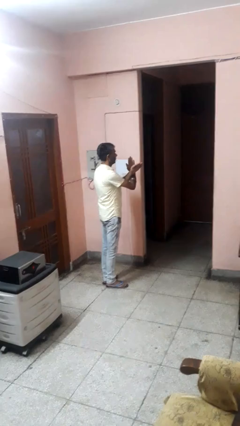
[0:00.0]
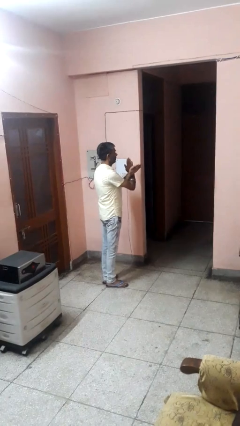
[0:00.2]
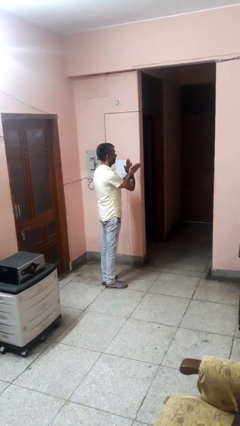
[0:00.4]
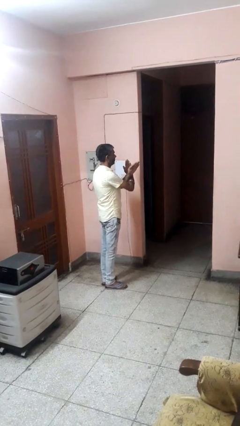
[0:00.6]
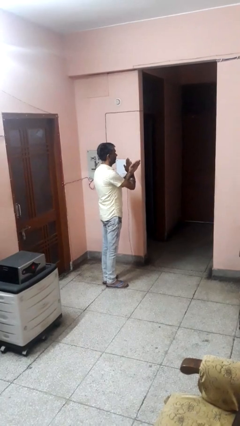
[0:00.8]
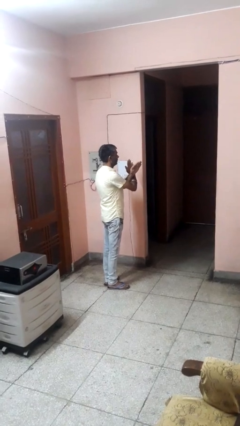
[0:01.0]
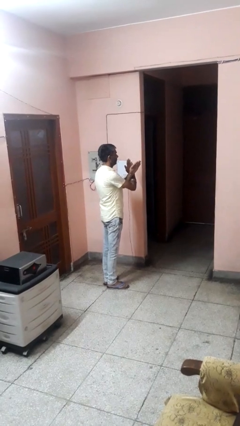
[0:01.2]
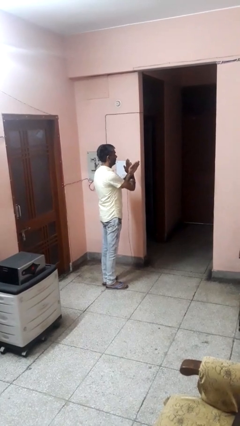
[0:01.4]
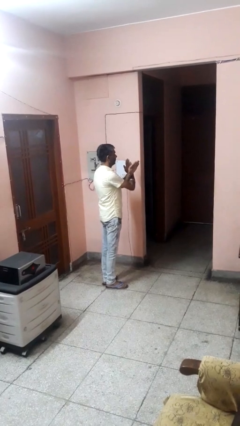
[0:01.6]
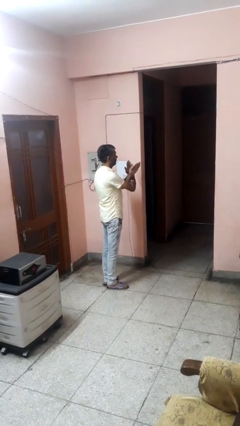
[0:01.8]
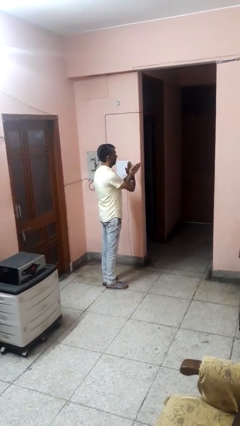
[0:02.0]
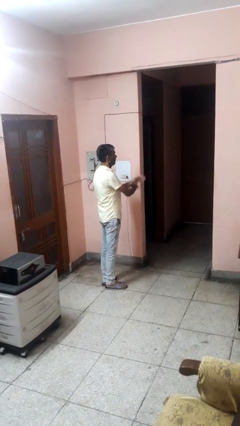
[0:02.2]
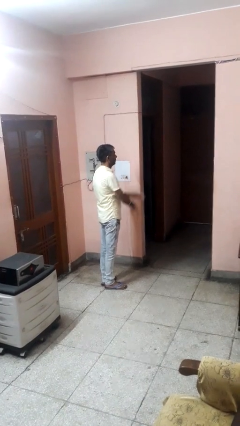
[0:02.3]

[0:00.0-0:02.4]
person gestures arms x

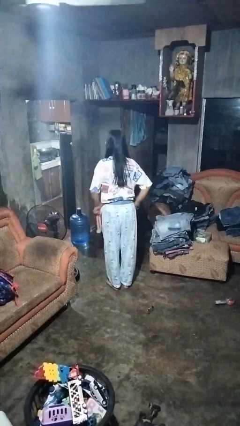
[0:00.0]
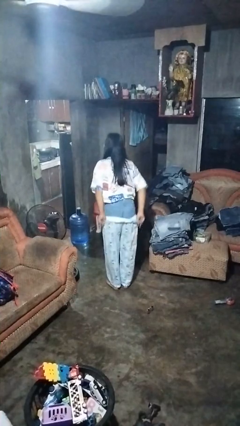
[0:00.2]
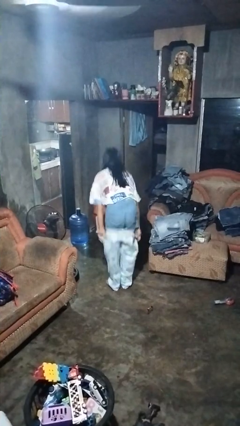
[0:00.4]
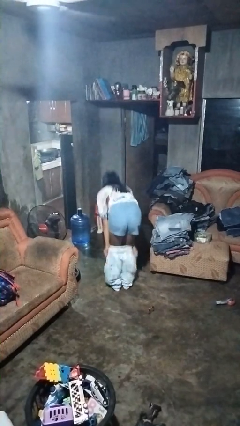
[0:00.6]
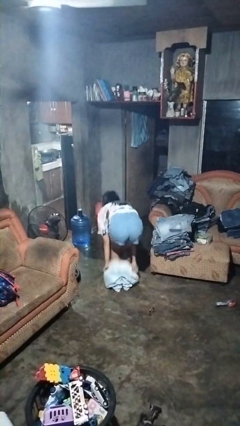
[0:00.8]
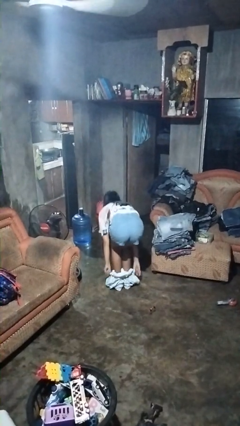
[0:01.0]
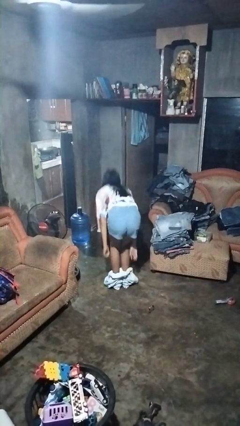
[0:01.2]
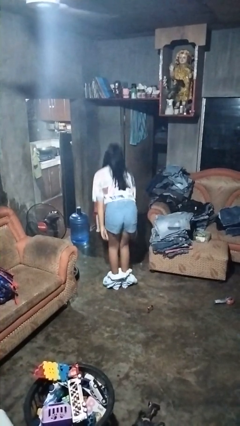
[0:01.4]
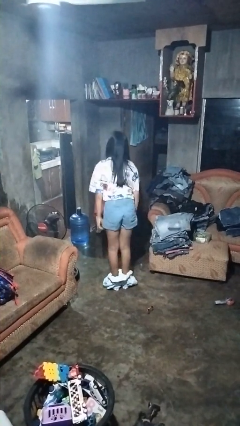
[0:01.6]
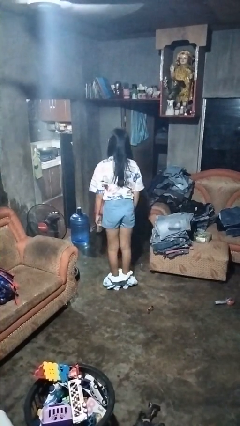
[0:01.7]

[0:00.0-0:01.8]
person takes off pants

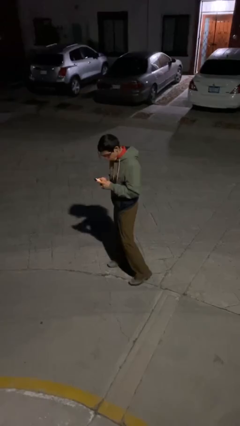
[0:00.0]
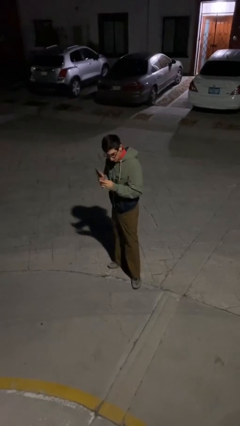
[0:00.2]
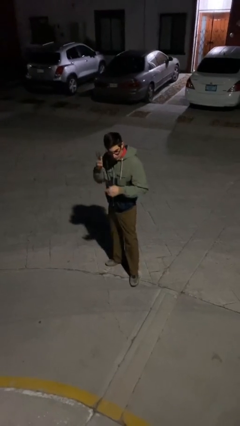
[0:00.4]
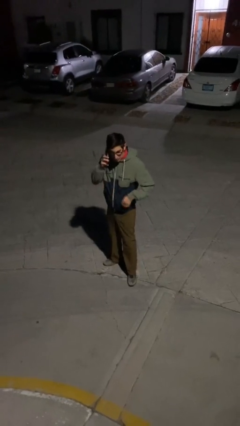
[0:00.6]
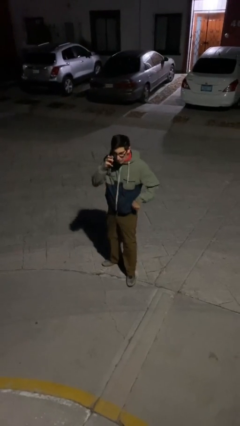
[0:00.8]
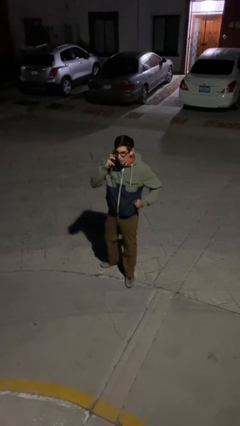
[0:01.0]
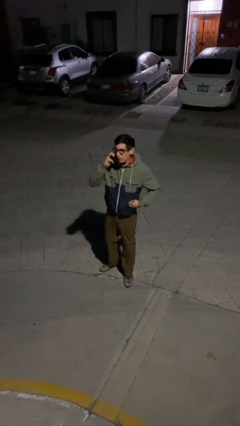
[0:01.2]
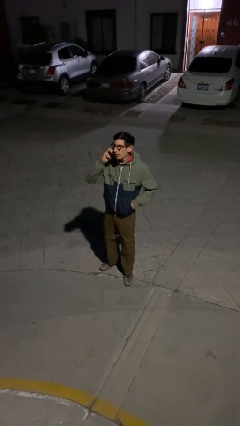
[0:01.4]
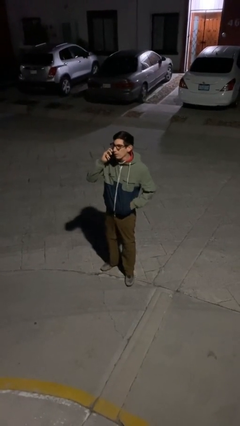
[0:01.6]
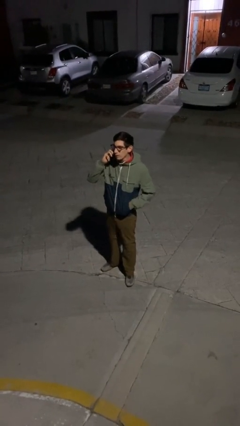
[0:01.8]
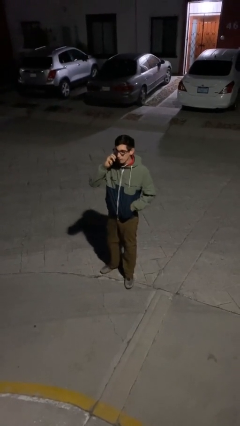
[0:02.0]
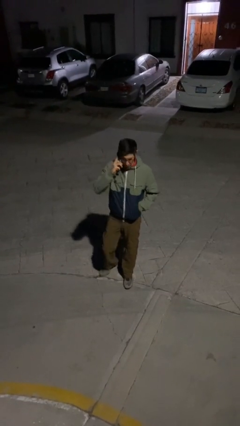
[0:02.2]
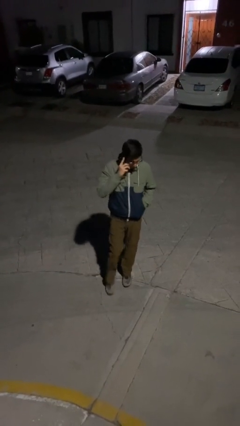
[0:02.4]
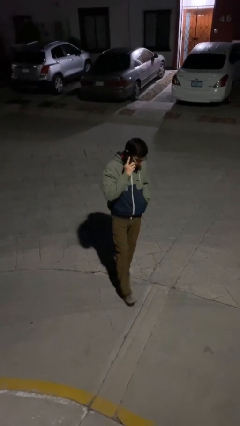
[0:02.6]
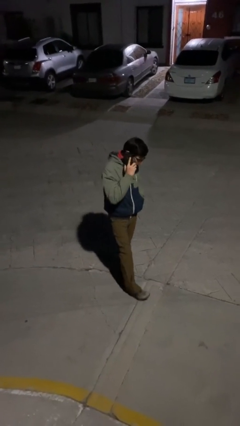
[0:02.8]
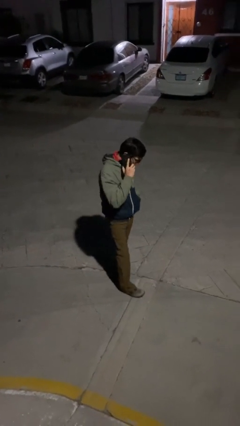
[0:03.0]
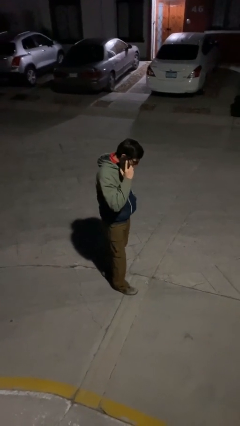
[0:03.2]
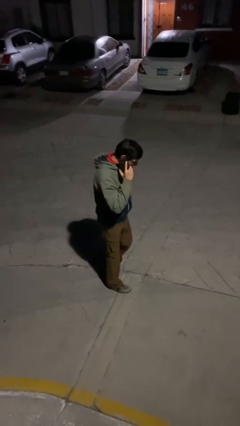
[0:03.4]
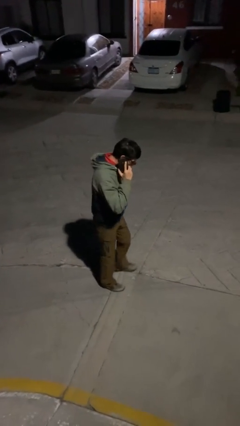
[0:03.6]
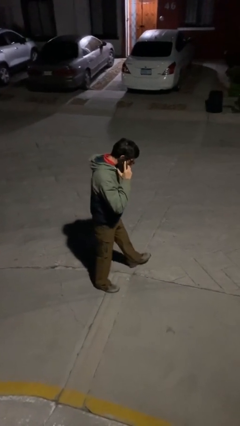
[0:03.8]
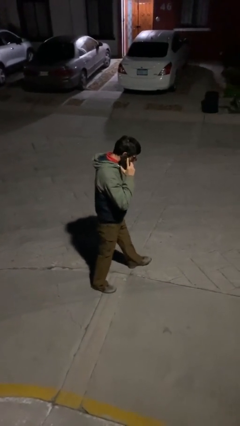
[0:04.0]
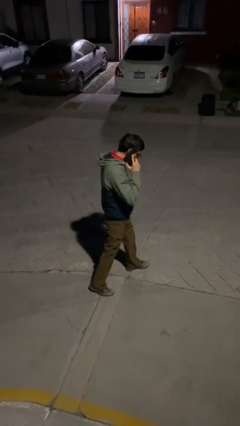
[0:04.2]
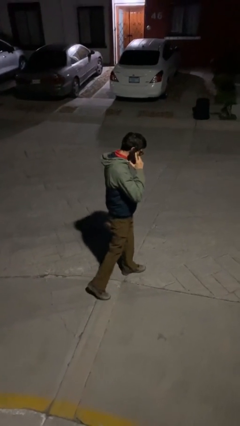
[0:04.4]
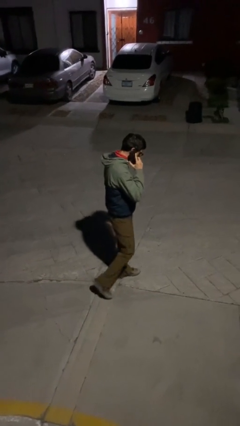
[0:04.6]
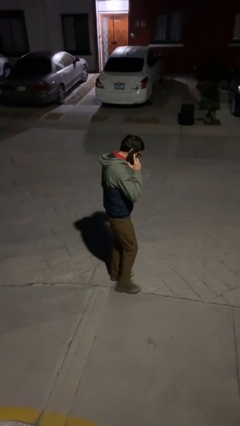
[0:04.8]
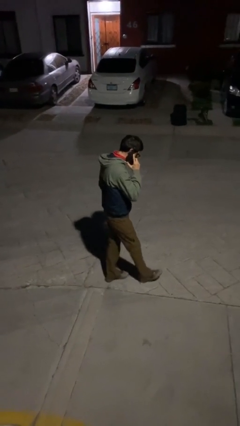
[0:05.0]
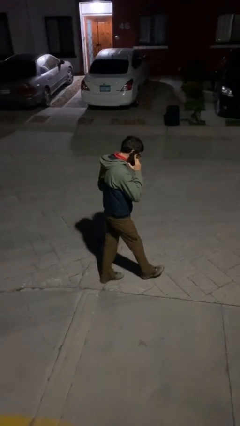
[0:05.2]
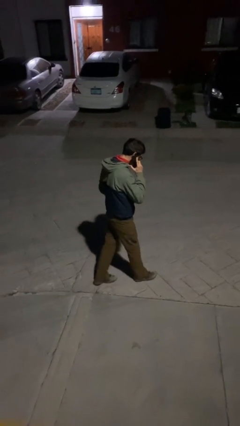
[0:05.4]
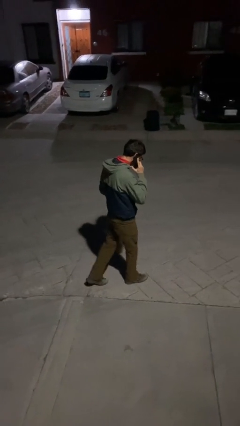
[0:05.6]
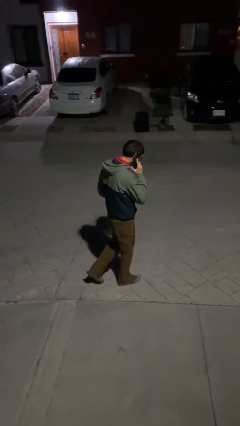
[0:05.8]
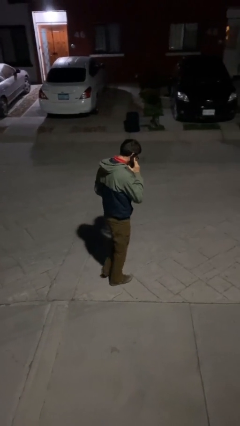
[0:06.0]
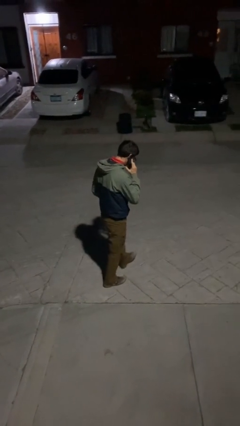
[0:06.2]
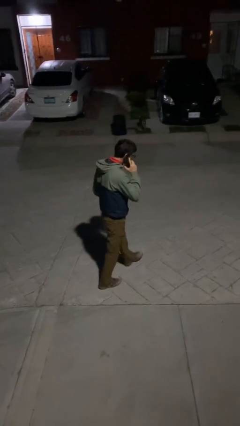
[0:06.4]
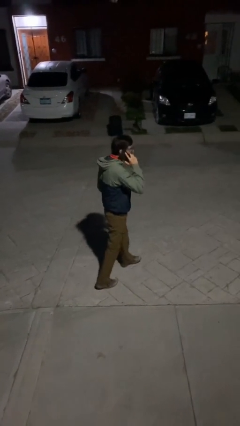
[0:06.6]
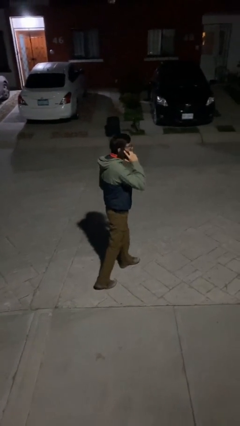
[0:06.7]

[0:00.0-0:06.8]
person talks on phone

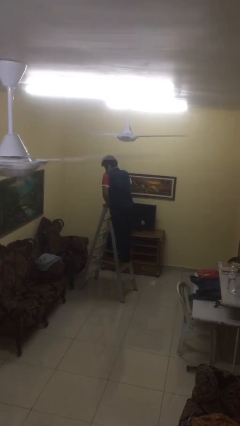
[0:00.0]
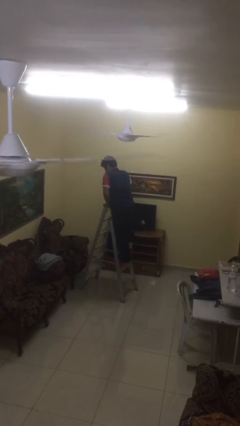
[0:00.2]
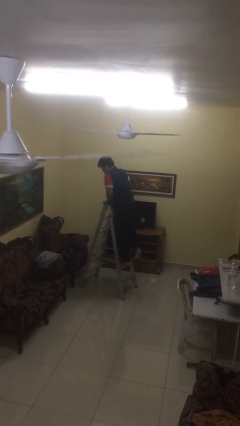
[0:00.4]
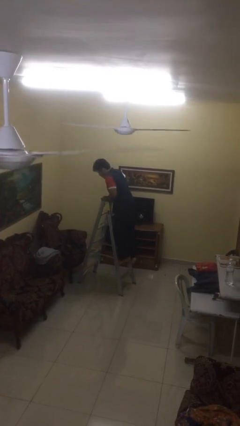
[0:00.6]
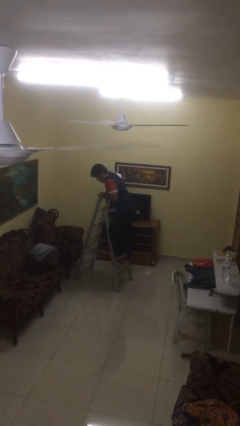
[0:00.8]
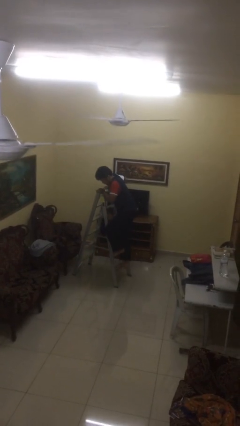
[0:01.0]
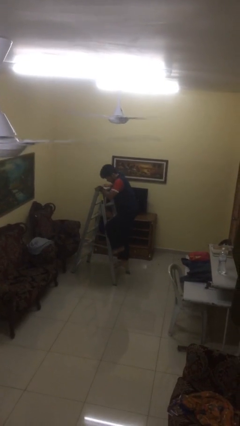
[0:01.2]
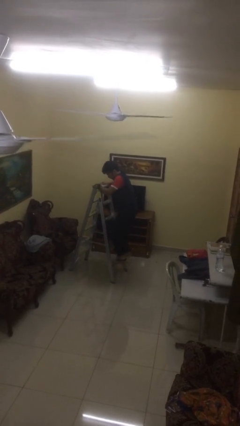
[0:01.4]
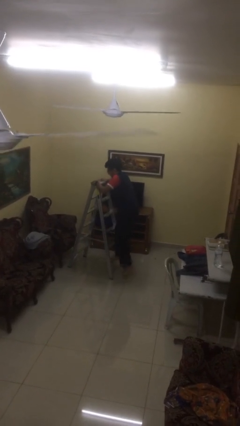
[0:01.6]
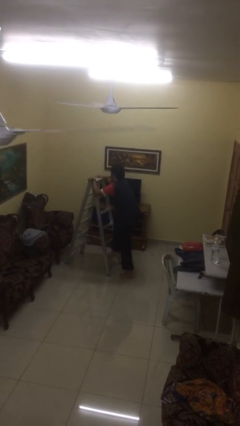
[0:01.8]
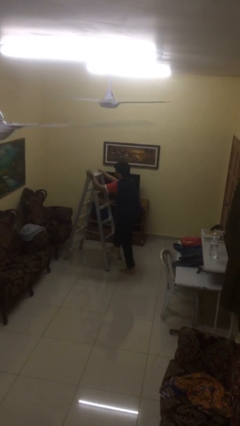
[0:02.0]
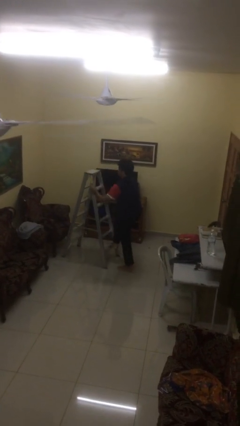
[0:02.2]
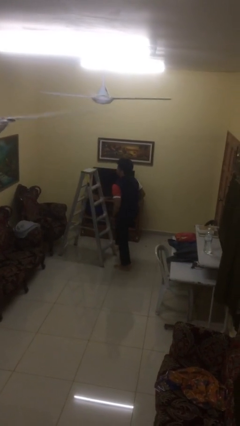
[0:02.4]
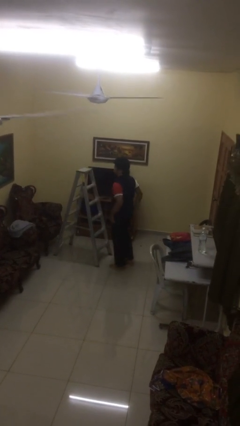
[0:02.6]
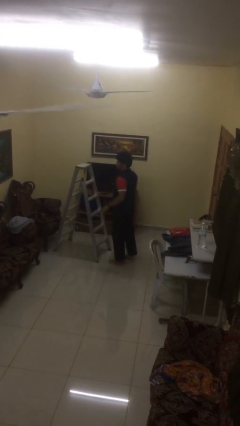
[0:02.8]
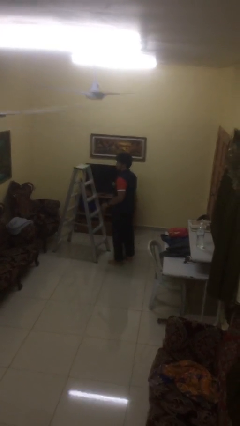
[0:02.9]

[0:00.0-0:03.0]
person climbs down ladder

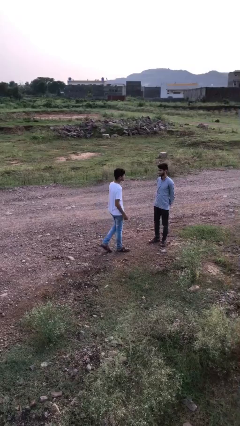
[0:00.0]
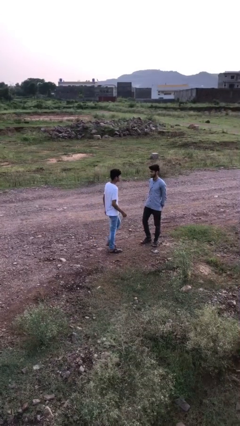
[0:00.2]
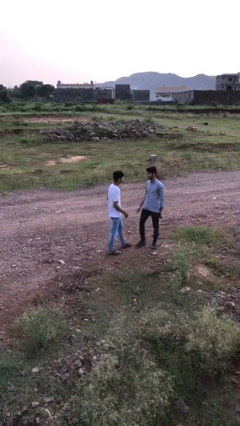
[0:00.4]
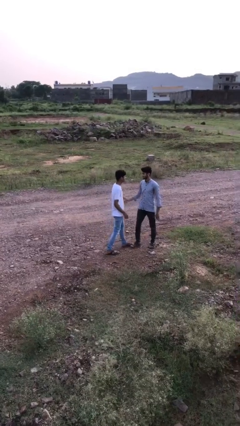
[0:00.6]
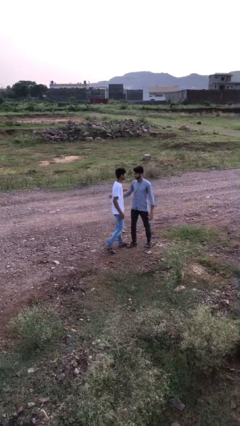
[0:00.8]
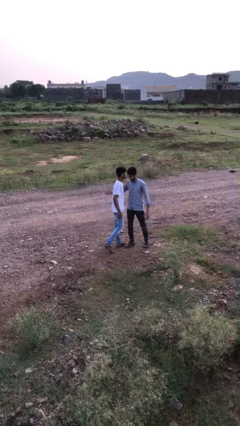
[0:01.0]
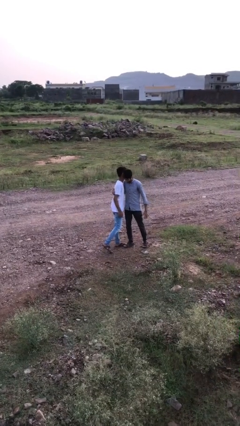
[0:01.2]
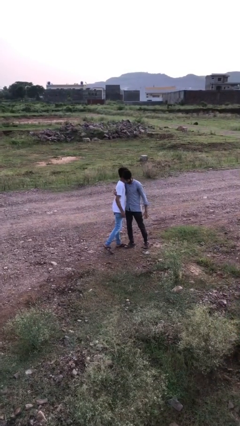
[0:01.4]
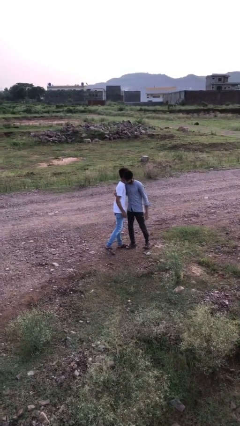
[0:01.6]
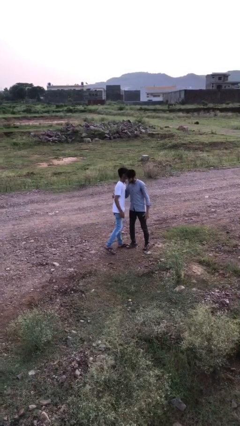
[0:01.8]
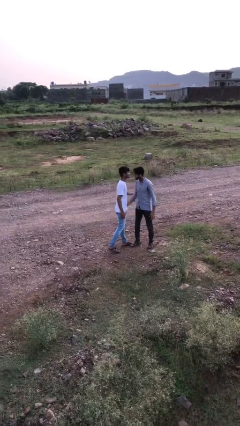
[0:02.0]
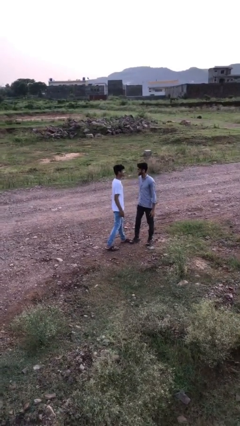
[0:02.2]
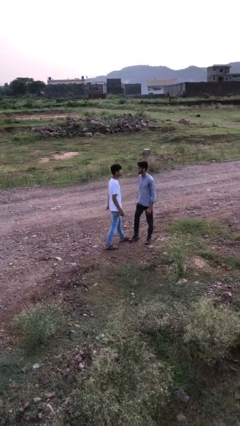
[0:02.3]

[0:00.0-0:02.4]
person embraces person

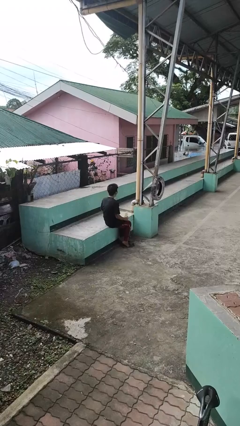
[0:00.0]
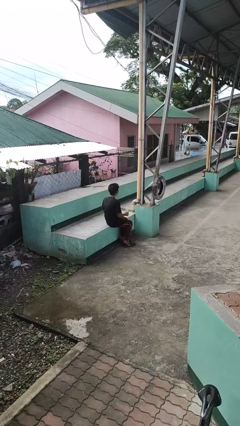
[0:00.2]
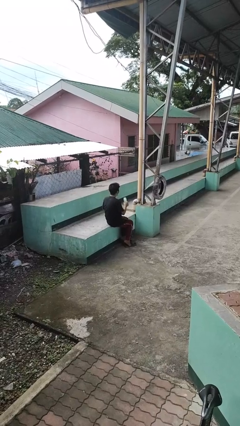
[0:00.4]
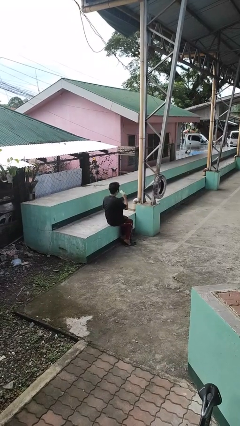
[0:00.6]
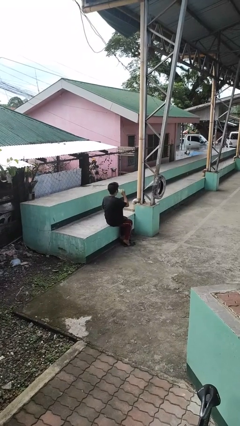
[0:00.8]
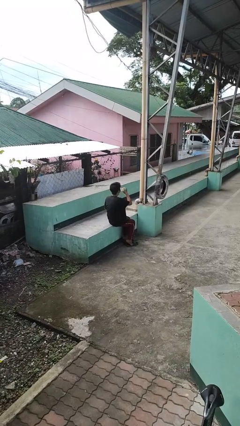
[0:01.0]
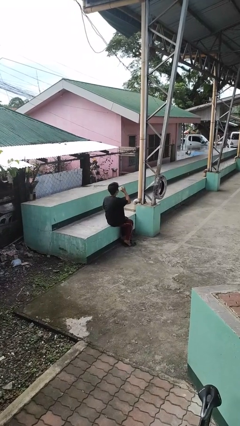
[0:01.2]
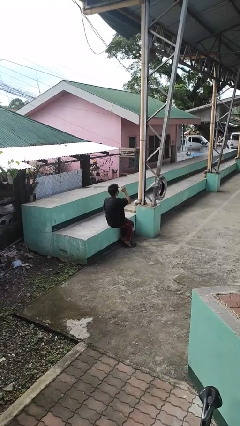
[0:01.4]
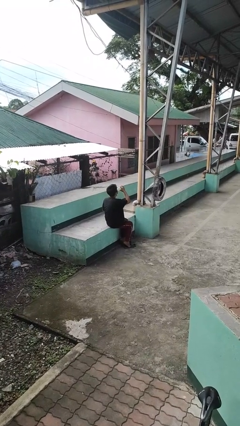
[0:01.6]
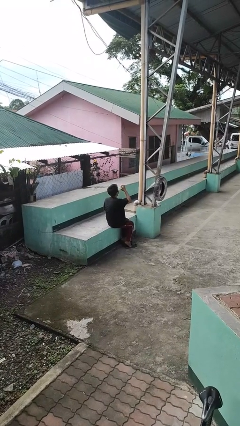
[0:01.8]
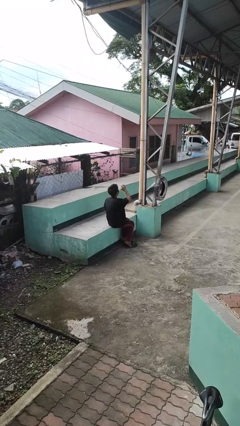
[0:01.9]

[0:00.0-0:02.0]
person drinks from bottle
